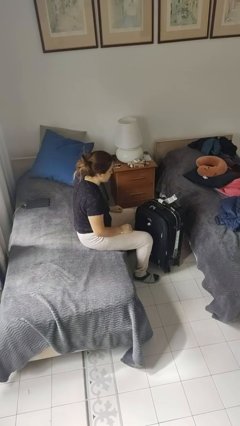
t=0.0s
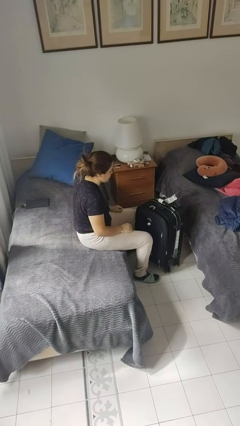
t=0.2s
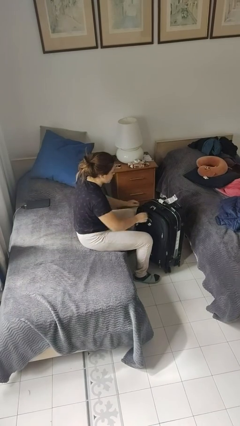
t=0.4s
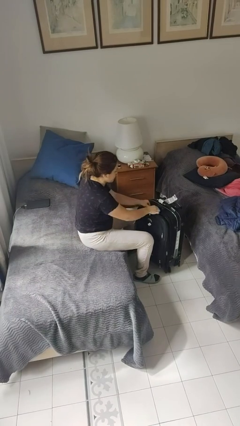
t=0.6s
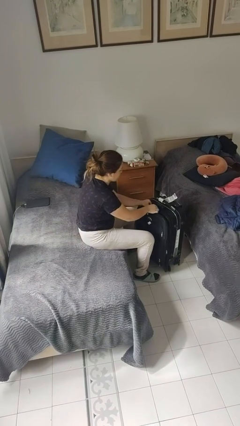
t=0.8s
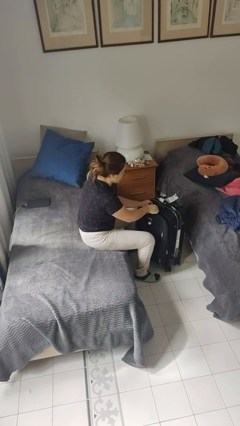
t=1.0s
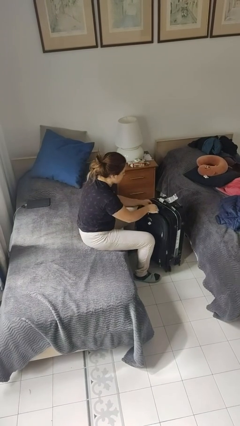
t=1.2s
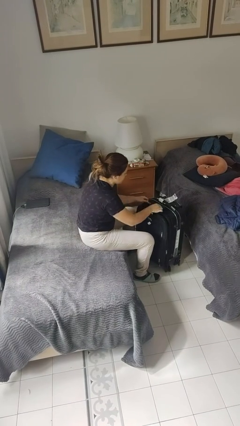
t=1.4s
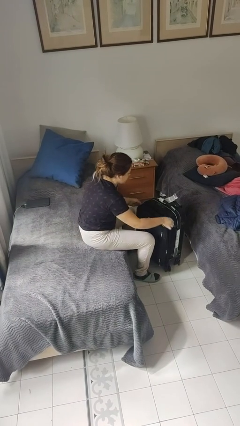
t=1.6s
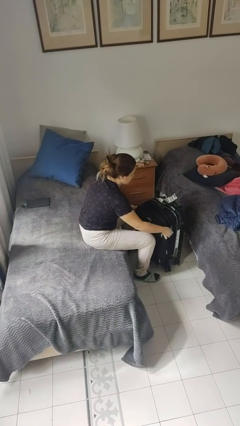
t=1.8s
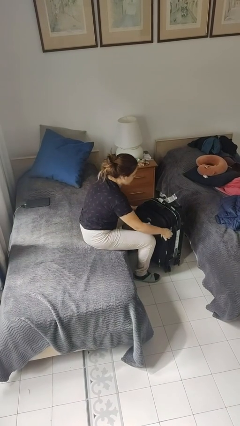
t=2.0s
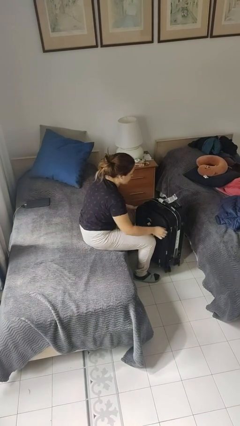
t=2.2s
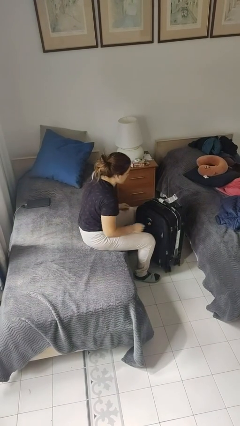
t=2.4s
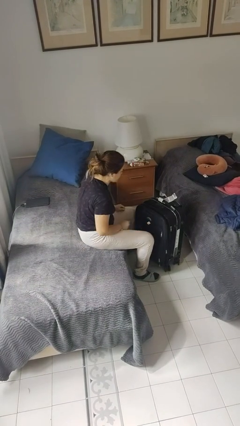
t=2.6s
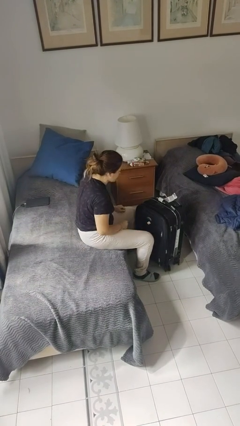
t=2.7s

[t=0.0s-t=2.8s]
person opens suitcase

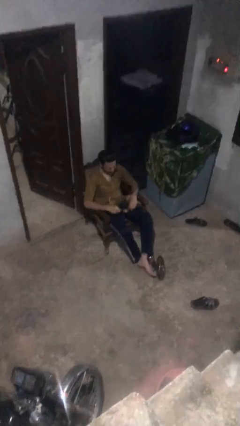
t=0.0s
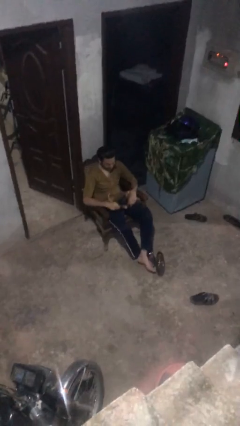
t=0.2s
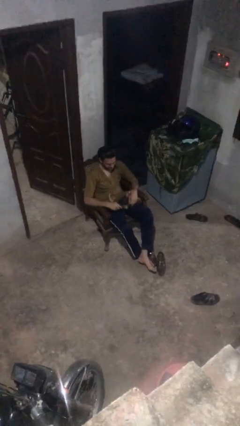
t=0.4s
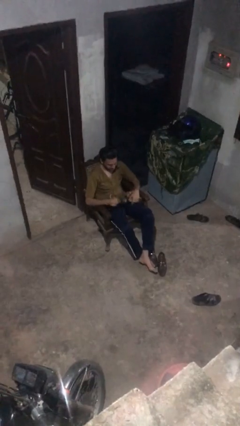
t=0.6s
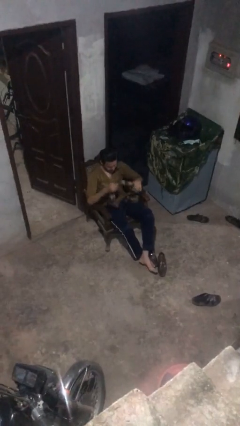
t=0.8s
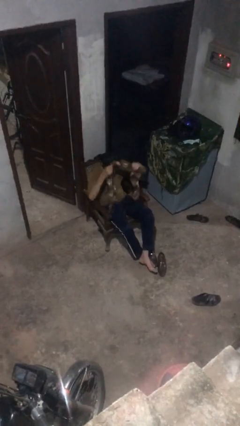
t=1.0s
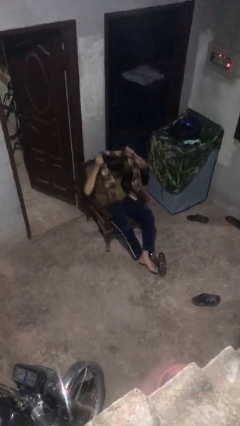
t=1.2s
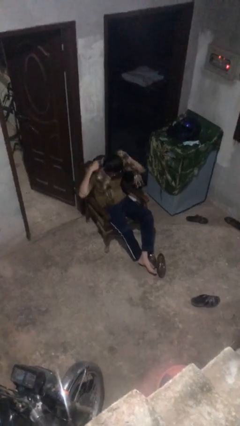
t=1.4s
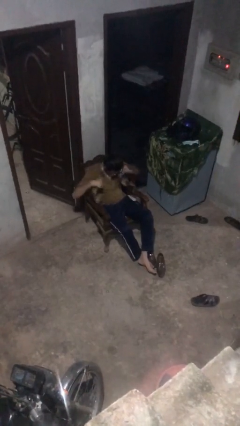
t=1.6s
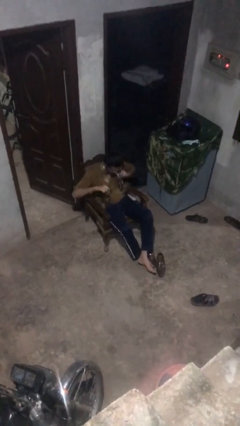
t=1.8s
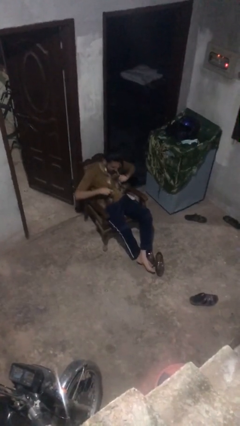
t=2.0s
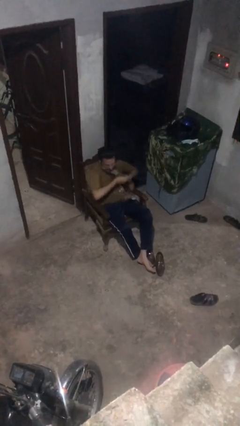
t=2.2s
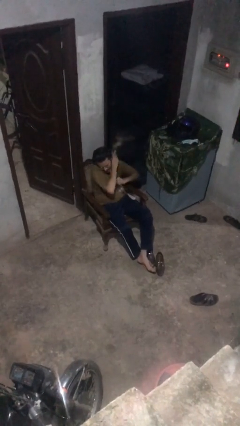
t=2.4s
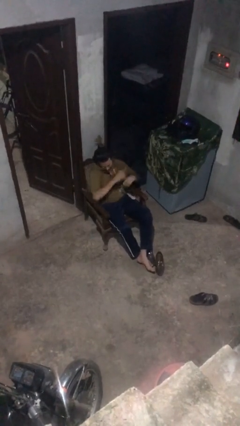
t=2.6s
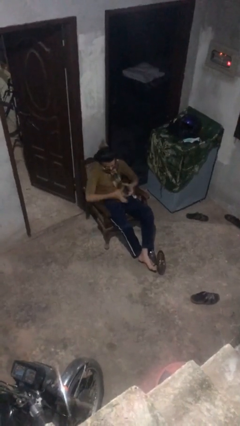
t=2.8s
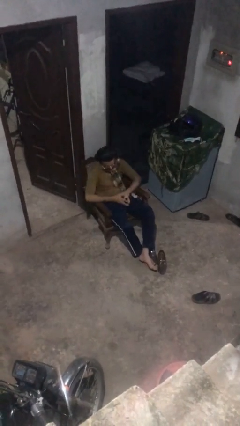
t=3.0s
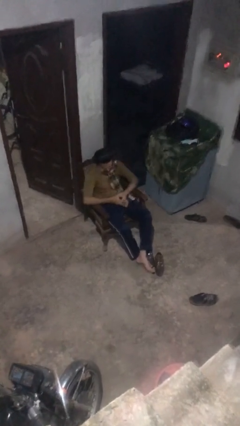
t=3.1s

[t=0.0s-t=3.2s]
person puts on scarf

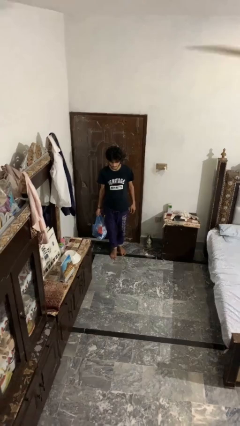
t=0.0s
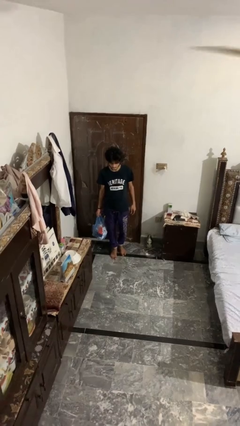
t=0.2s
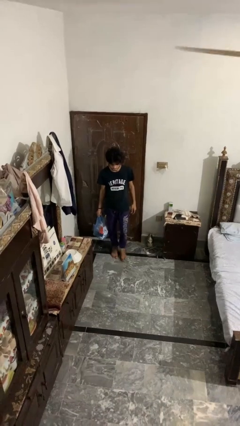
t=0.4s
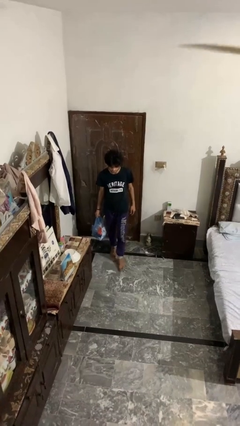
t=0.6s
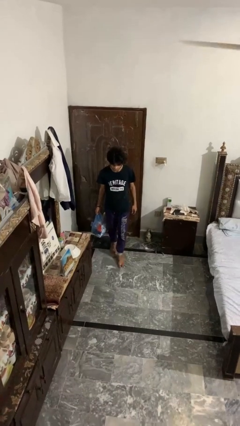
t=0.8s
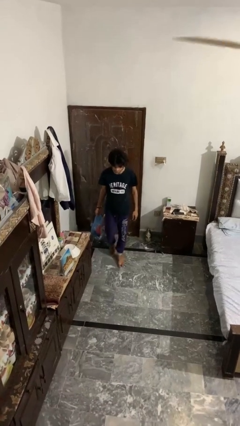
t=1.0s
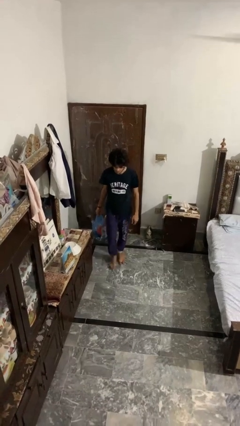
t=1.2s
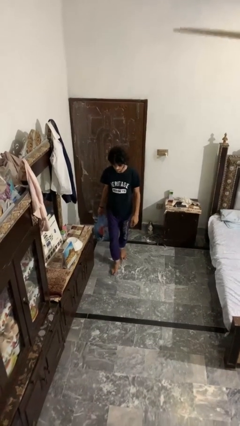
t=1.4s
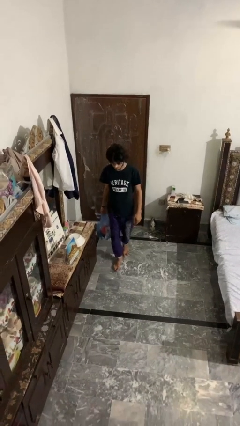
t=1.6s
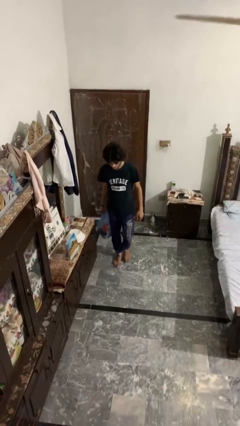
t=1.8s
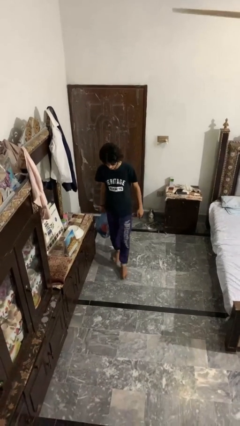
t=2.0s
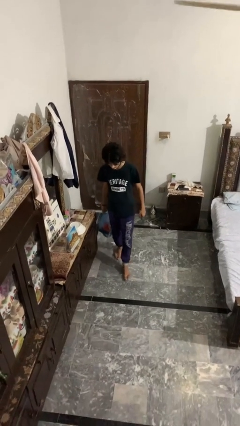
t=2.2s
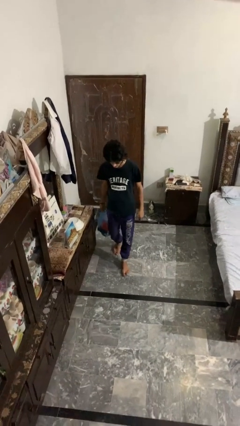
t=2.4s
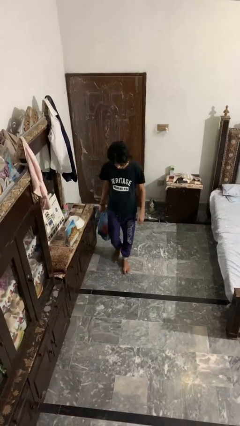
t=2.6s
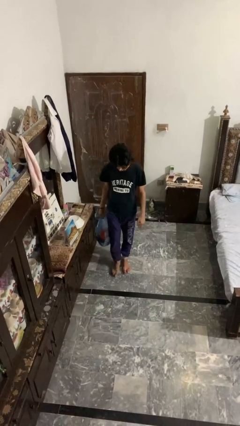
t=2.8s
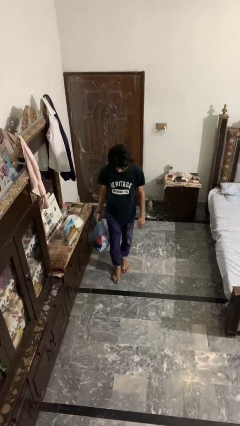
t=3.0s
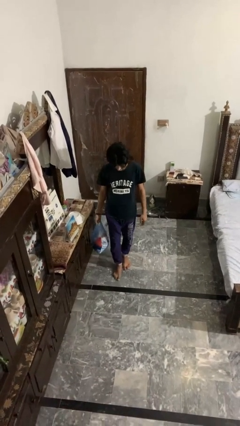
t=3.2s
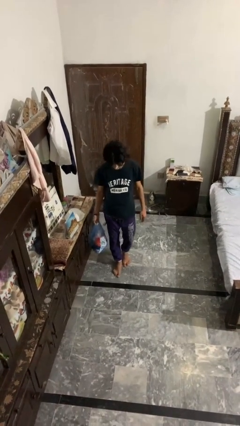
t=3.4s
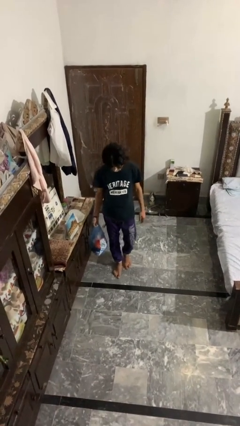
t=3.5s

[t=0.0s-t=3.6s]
person carries groceries

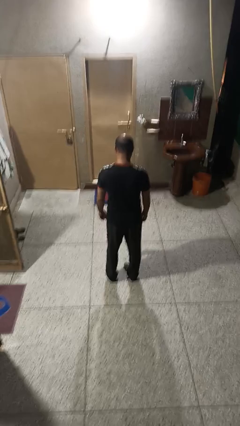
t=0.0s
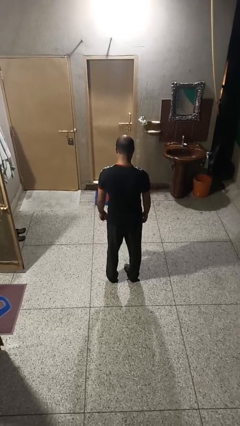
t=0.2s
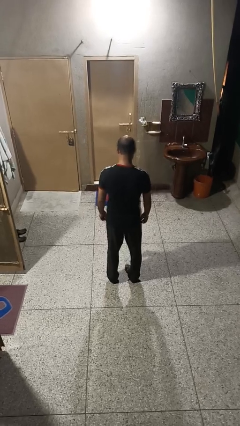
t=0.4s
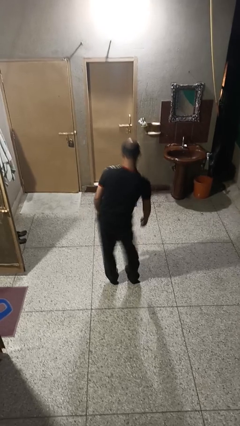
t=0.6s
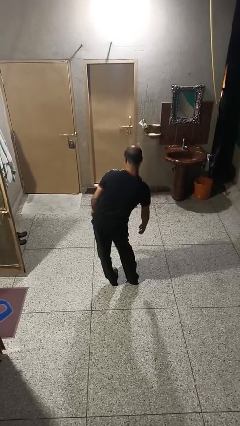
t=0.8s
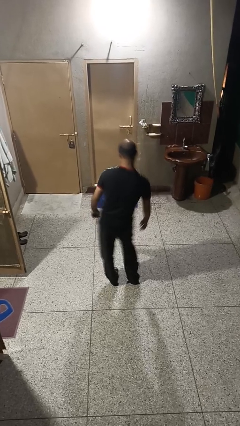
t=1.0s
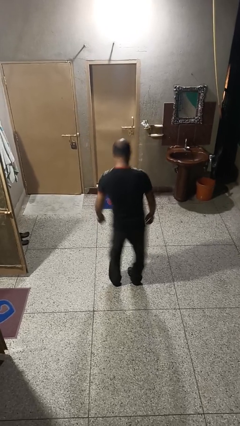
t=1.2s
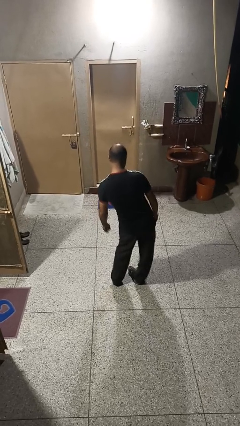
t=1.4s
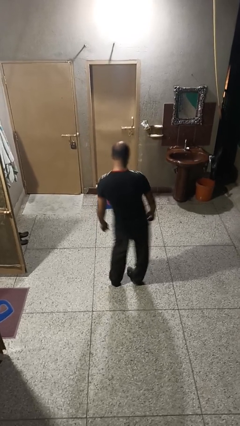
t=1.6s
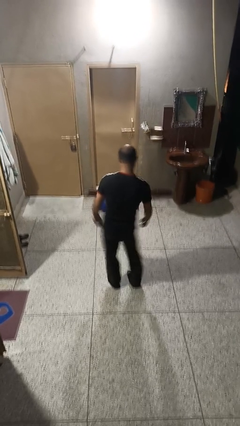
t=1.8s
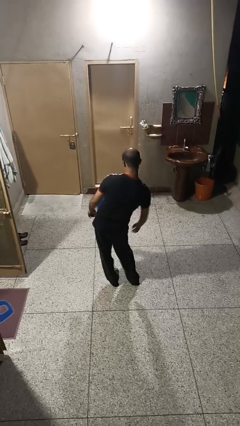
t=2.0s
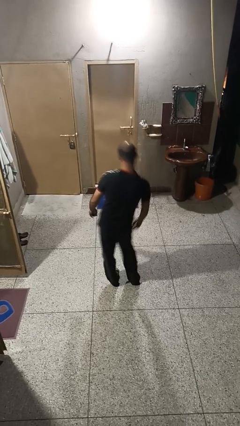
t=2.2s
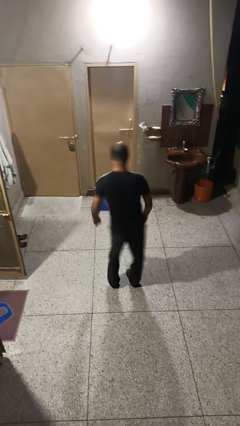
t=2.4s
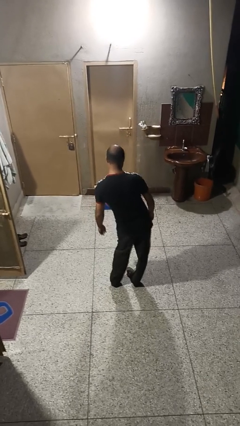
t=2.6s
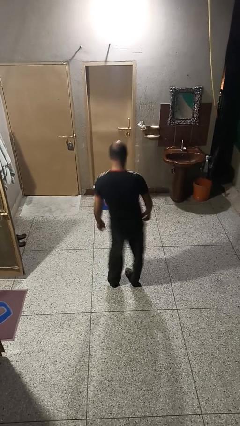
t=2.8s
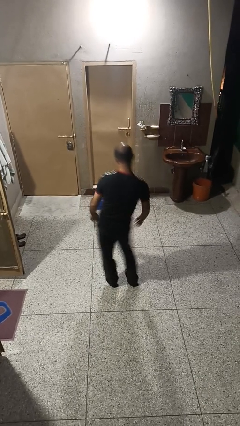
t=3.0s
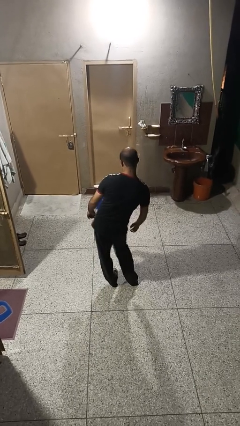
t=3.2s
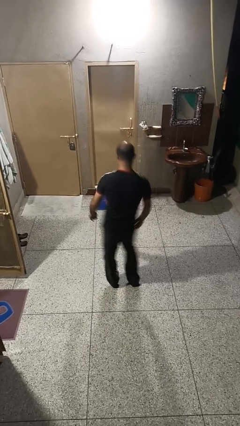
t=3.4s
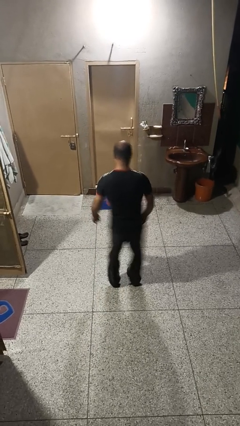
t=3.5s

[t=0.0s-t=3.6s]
person wiggles hips

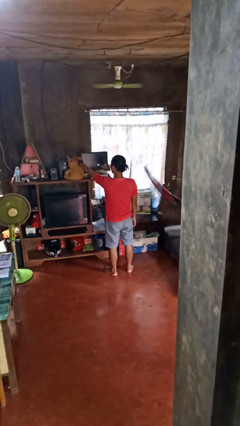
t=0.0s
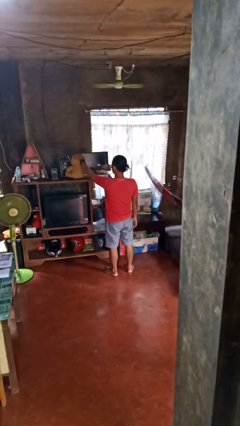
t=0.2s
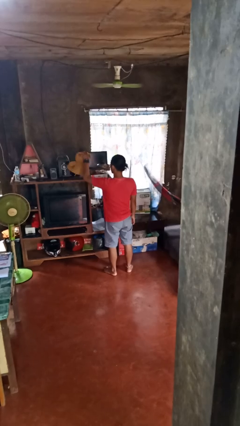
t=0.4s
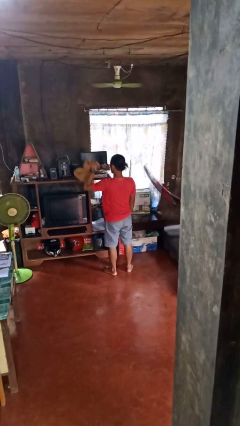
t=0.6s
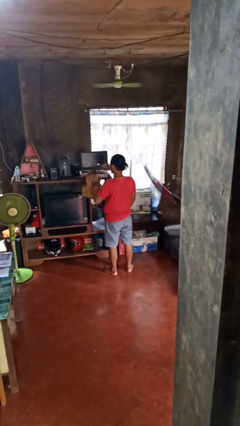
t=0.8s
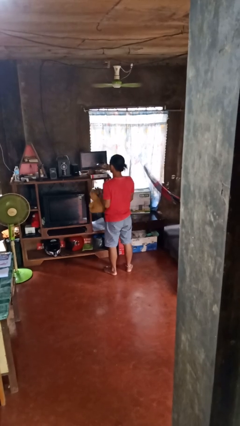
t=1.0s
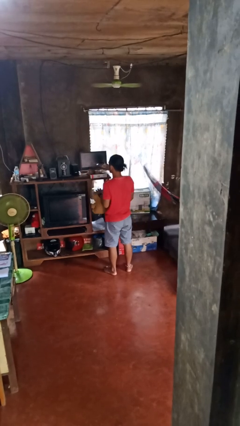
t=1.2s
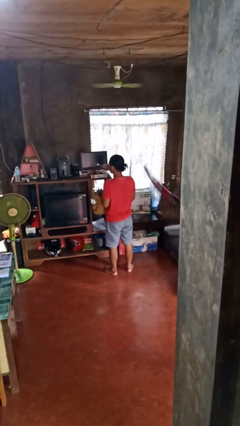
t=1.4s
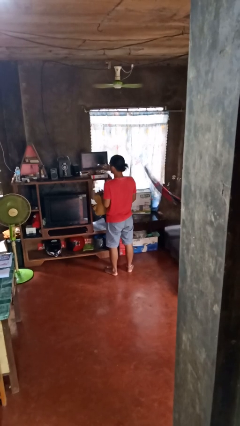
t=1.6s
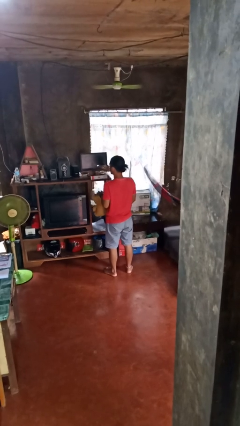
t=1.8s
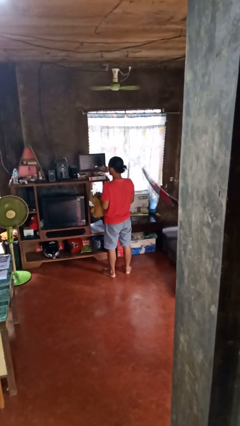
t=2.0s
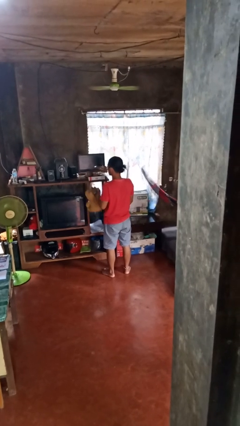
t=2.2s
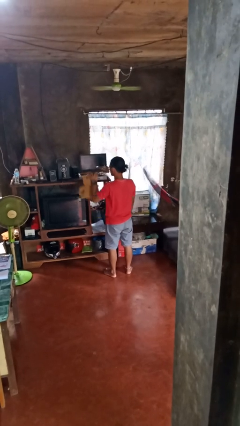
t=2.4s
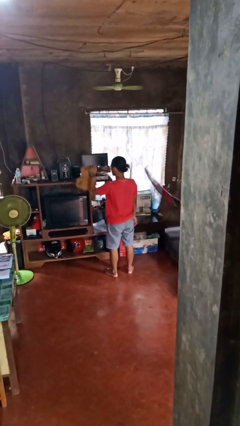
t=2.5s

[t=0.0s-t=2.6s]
person picks up object from shelf

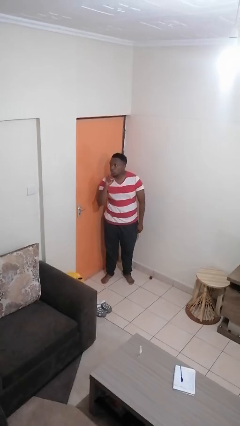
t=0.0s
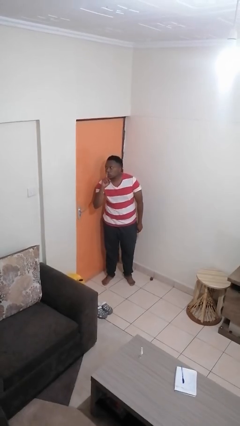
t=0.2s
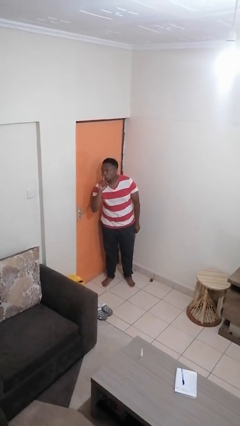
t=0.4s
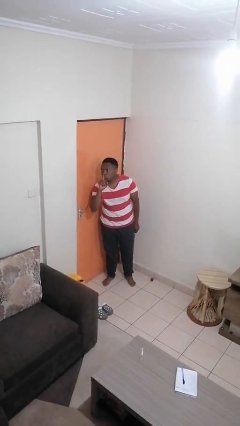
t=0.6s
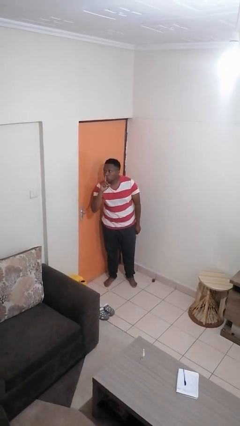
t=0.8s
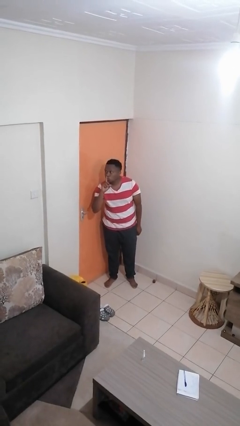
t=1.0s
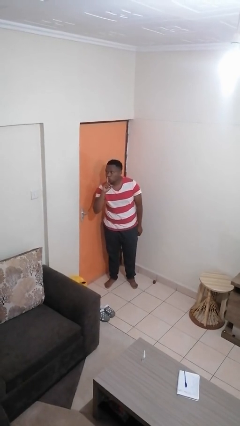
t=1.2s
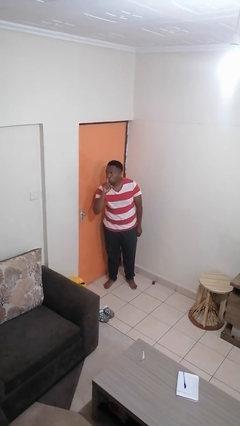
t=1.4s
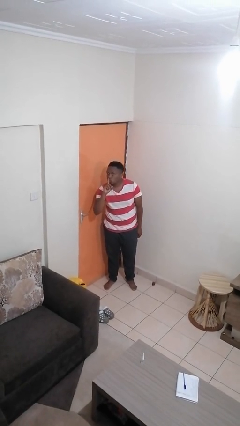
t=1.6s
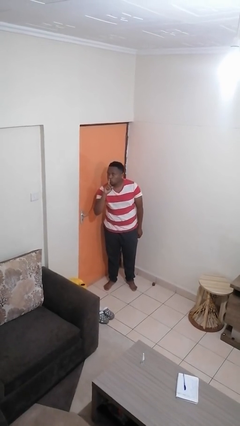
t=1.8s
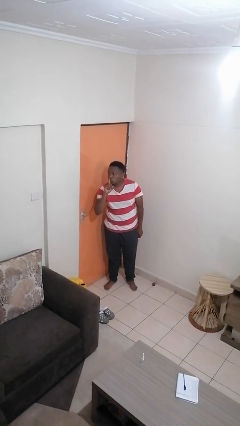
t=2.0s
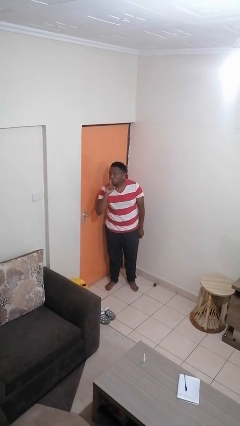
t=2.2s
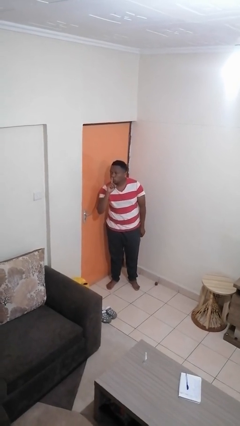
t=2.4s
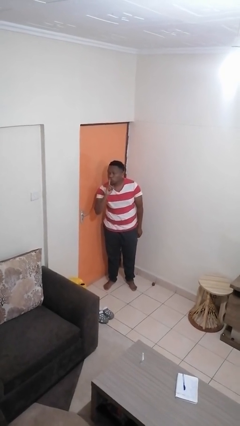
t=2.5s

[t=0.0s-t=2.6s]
person gestures be quiet
